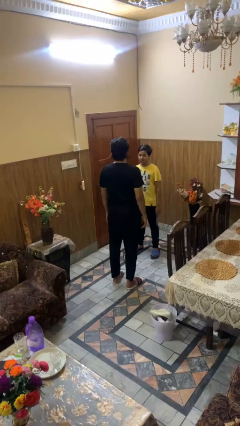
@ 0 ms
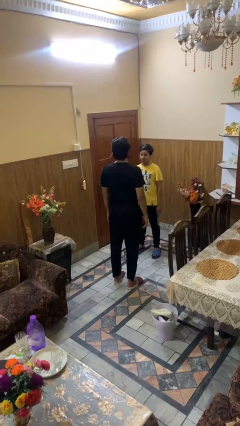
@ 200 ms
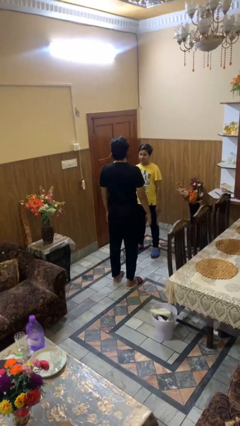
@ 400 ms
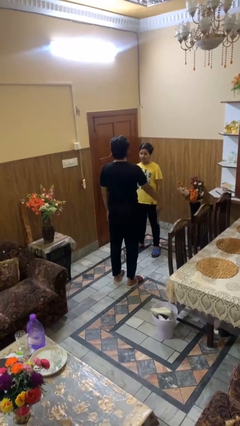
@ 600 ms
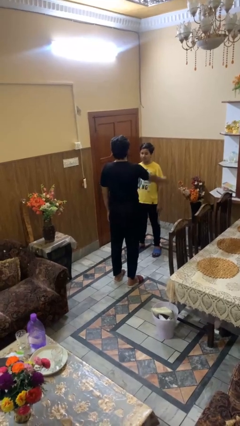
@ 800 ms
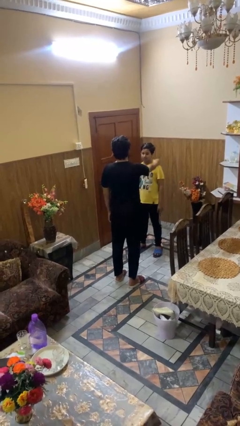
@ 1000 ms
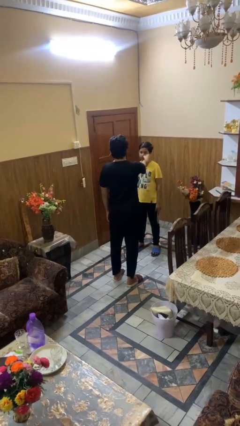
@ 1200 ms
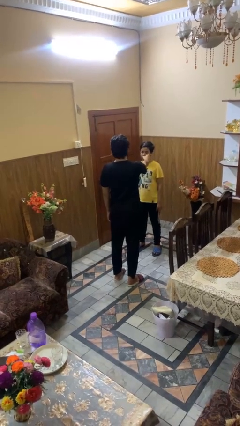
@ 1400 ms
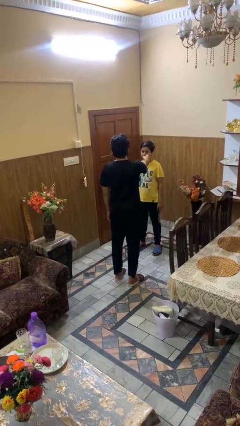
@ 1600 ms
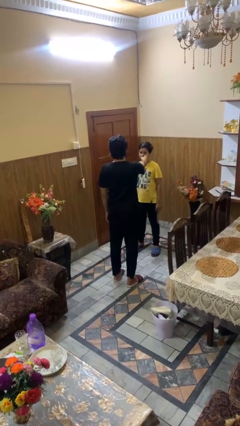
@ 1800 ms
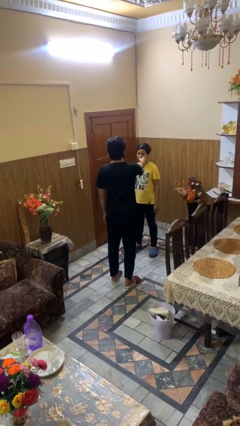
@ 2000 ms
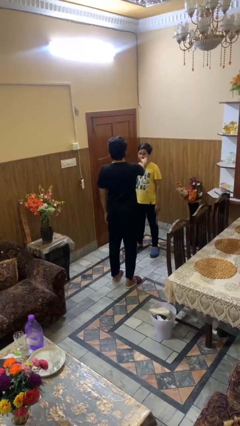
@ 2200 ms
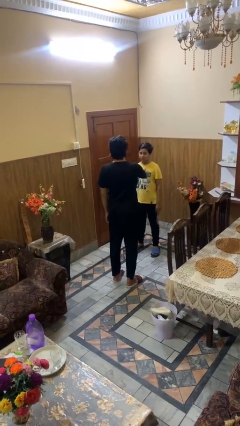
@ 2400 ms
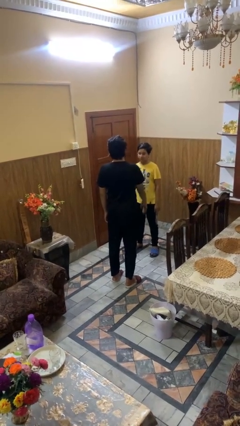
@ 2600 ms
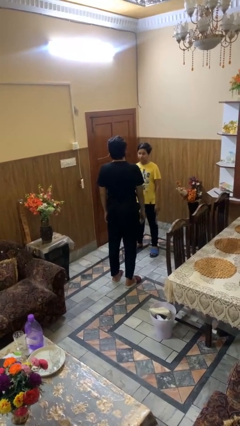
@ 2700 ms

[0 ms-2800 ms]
person touches face of person

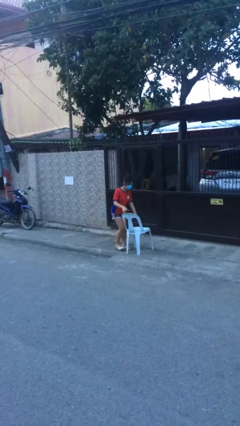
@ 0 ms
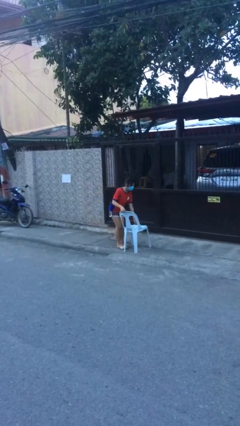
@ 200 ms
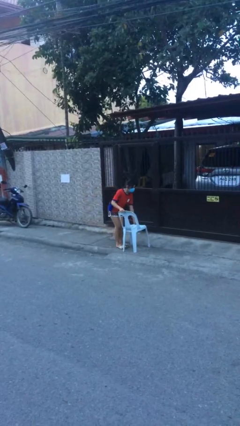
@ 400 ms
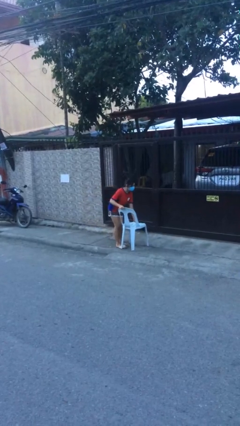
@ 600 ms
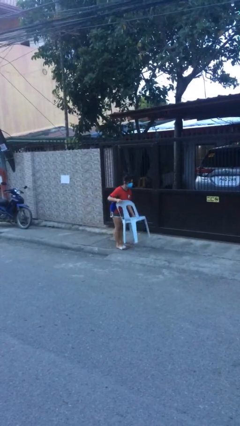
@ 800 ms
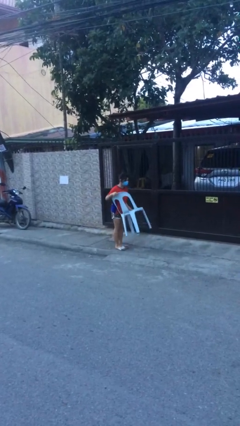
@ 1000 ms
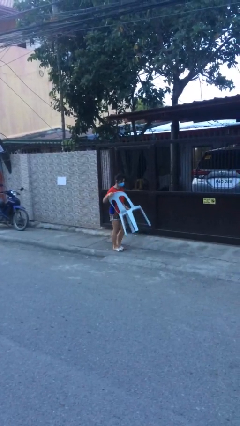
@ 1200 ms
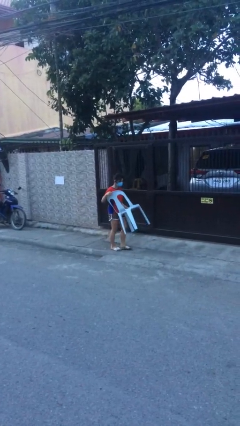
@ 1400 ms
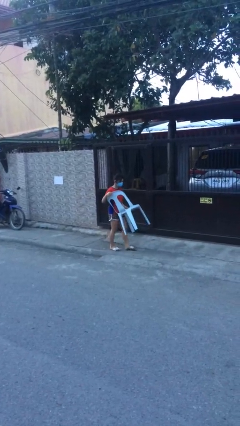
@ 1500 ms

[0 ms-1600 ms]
person picks up object from floor

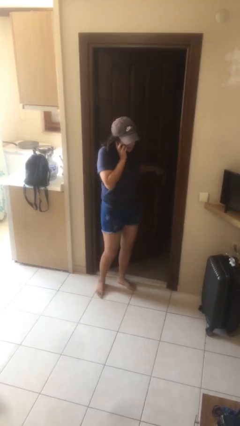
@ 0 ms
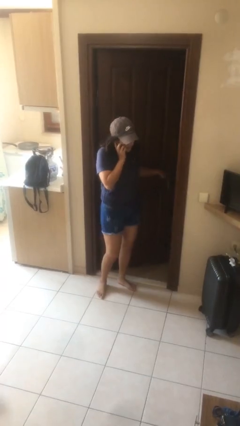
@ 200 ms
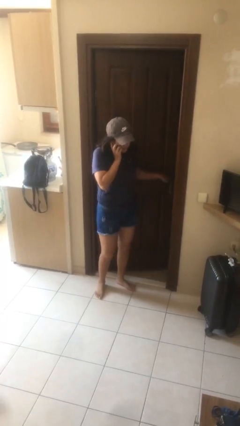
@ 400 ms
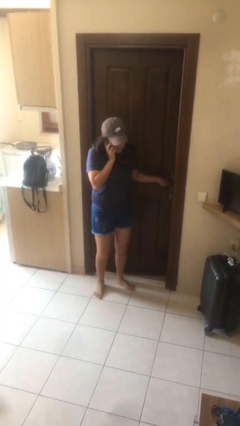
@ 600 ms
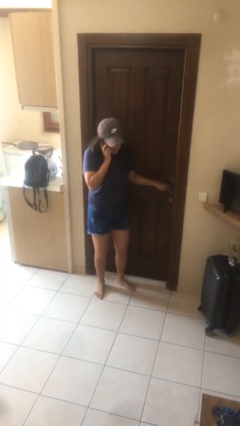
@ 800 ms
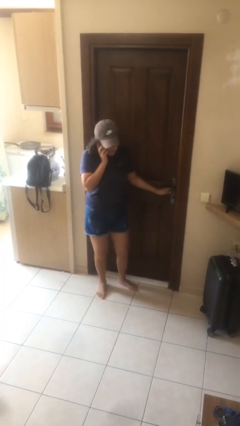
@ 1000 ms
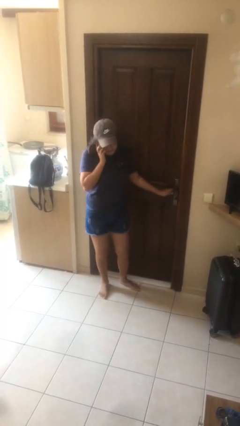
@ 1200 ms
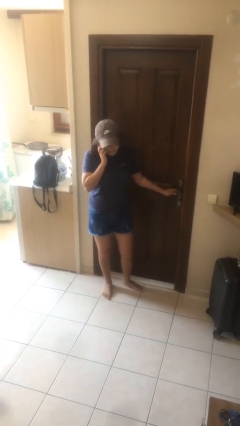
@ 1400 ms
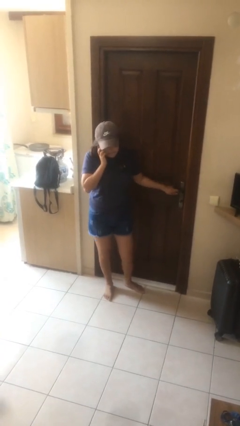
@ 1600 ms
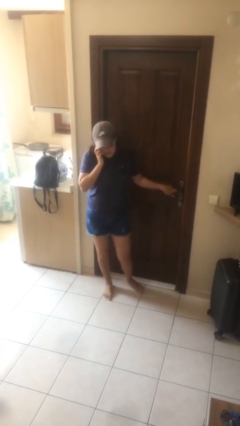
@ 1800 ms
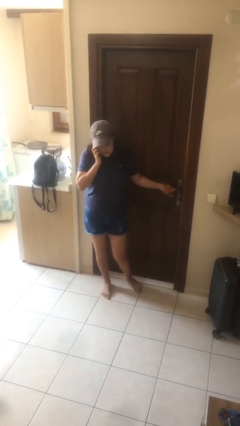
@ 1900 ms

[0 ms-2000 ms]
person closes facility door

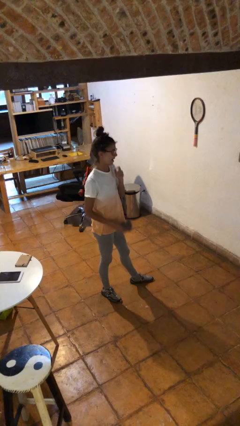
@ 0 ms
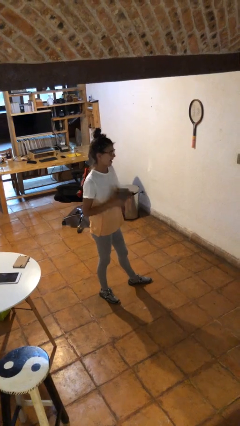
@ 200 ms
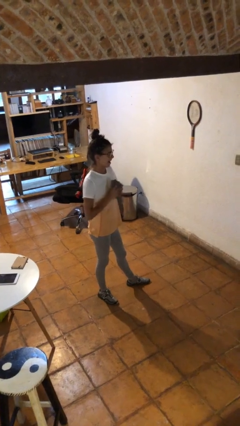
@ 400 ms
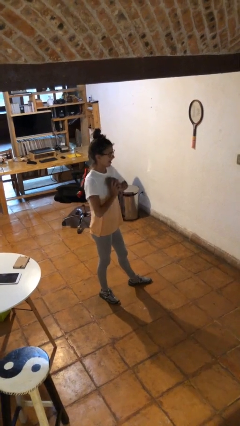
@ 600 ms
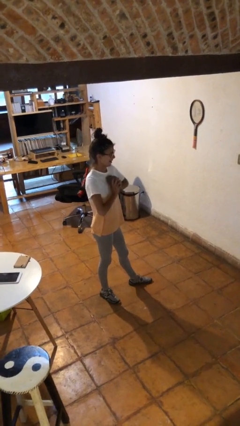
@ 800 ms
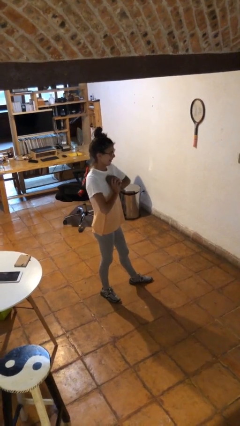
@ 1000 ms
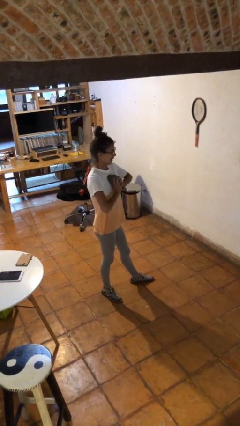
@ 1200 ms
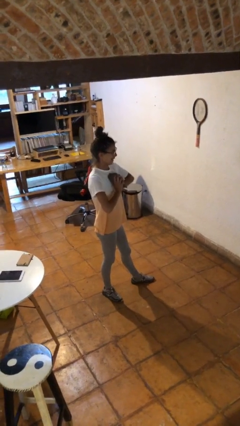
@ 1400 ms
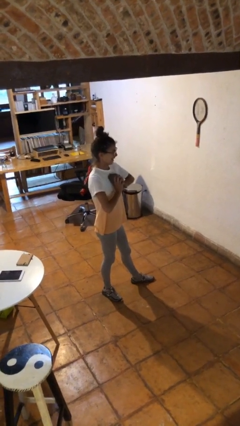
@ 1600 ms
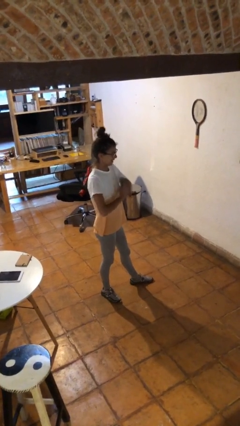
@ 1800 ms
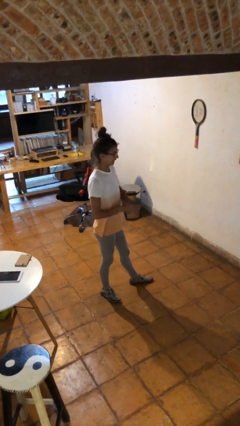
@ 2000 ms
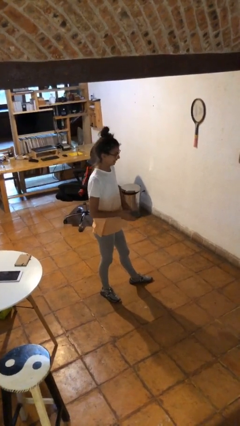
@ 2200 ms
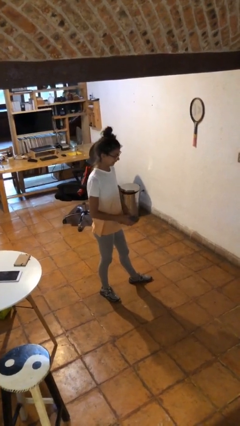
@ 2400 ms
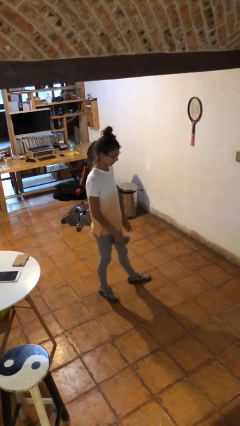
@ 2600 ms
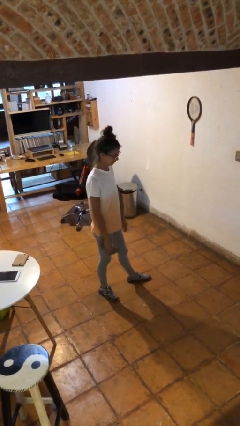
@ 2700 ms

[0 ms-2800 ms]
person squeezes object

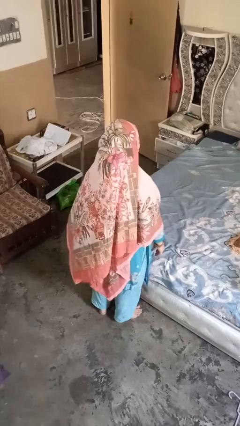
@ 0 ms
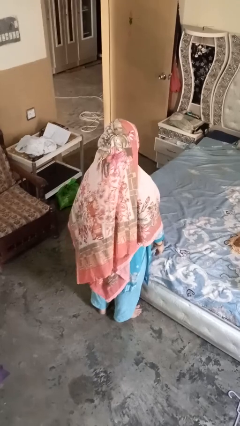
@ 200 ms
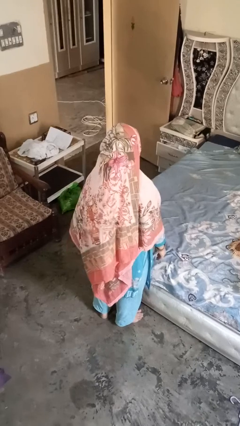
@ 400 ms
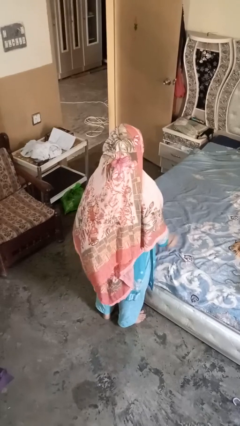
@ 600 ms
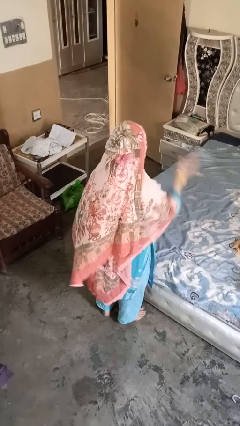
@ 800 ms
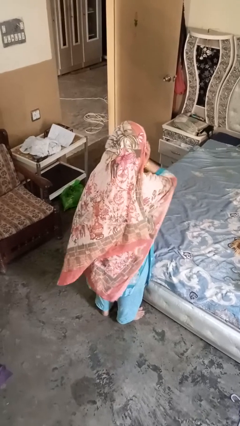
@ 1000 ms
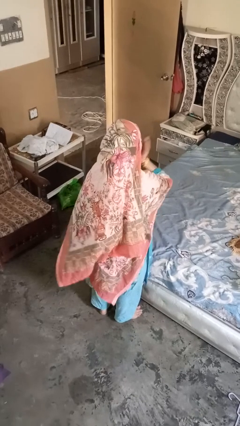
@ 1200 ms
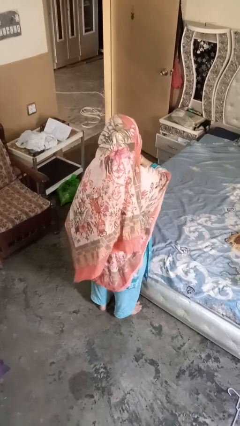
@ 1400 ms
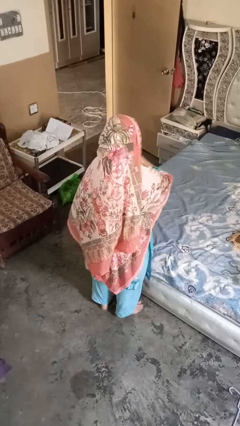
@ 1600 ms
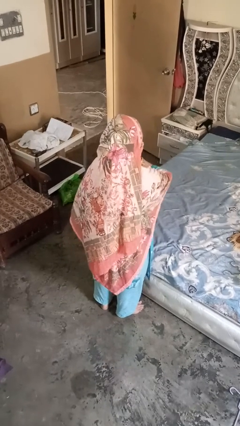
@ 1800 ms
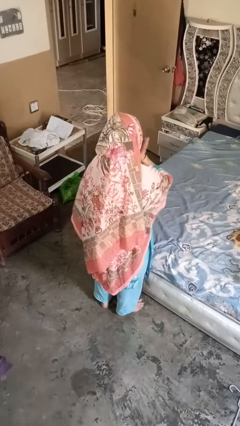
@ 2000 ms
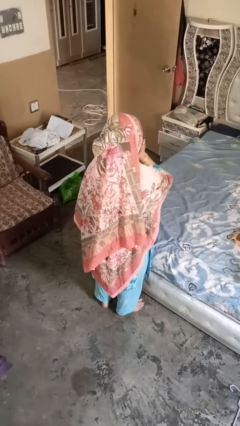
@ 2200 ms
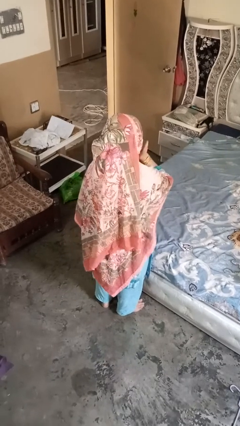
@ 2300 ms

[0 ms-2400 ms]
person strokes chin

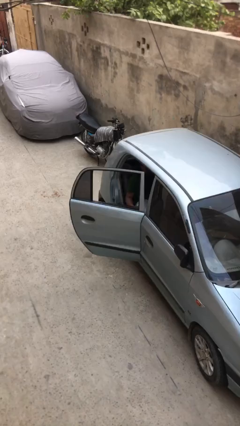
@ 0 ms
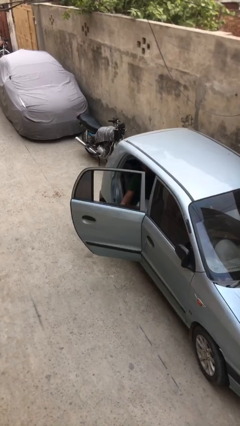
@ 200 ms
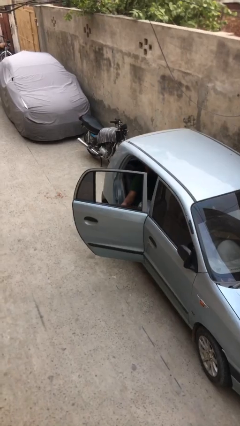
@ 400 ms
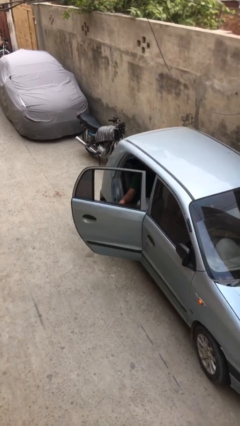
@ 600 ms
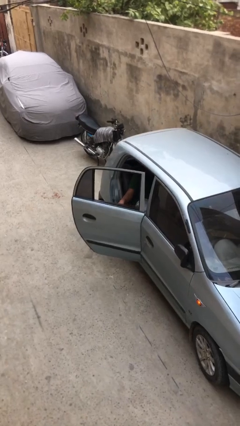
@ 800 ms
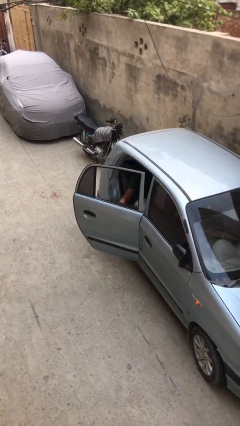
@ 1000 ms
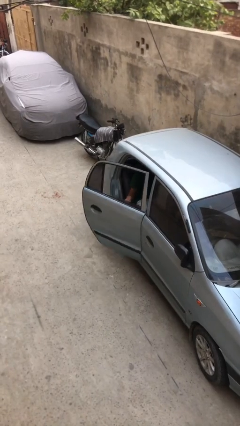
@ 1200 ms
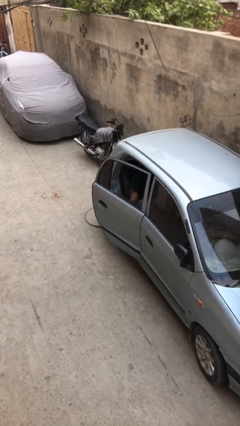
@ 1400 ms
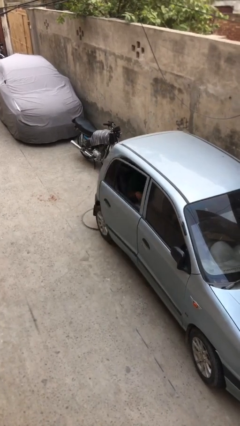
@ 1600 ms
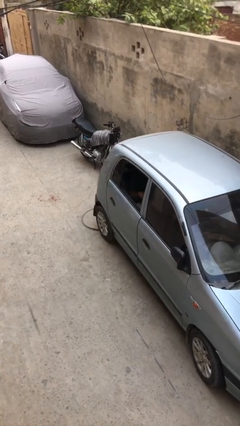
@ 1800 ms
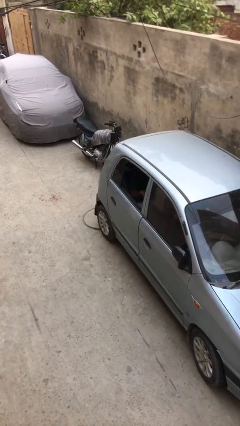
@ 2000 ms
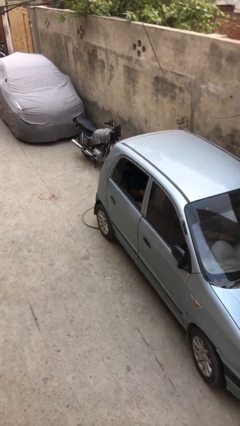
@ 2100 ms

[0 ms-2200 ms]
person closes car door

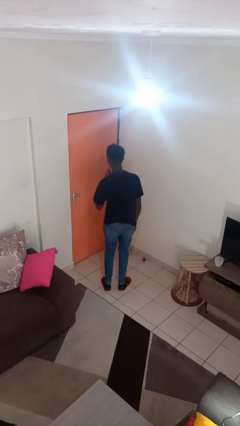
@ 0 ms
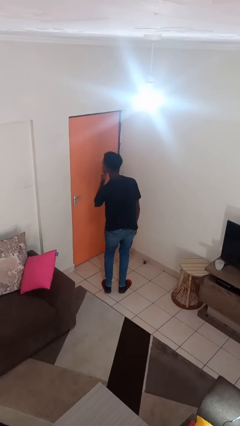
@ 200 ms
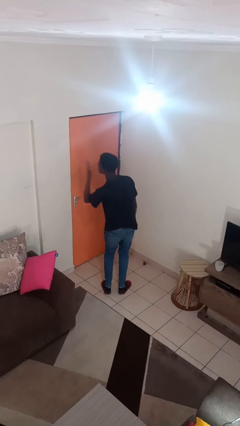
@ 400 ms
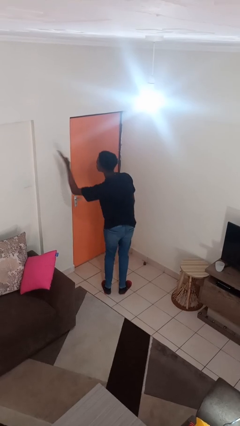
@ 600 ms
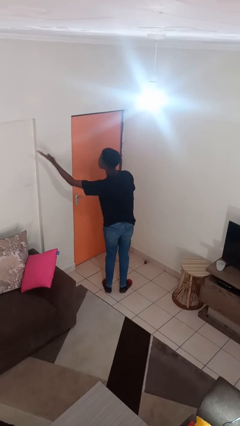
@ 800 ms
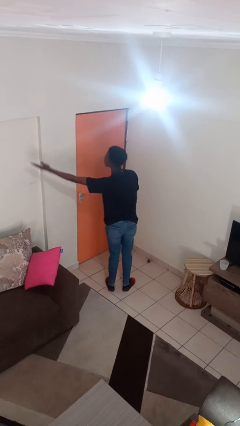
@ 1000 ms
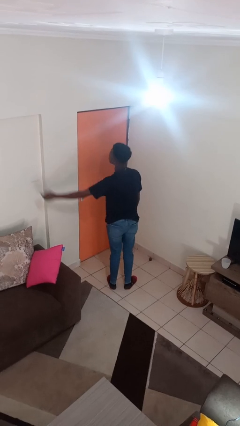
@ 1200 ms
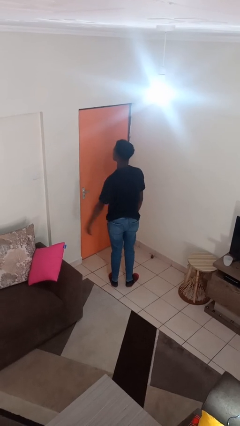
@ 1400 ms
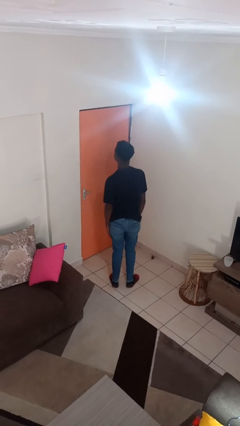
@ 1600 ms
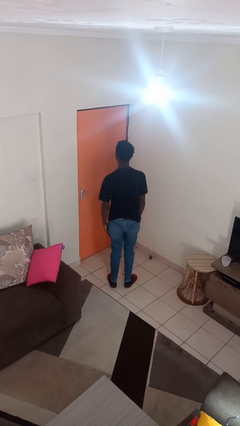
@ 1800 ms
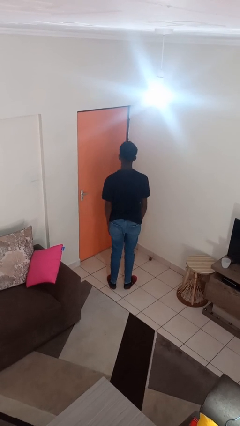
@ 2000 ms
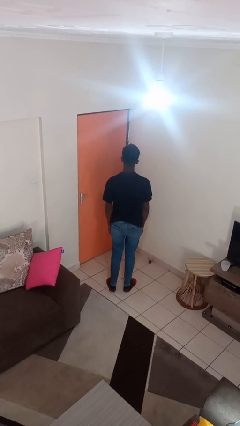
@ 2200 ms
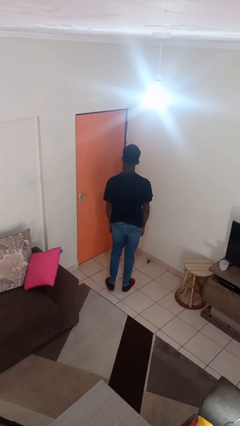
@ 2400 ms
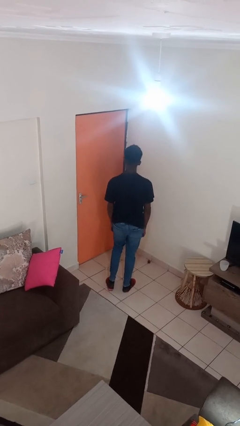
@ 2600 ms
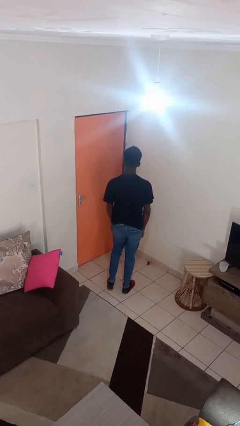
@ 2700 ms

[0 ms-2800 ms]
person gestures blow kiss

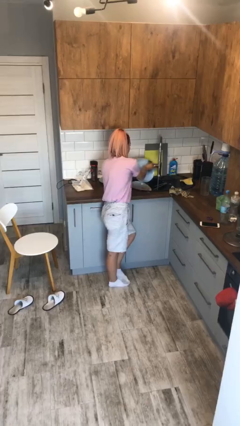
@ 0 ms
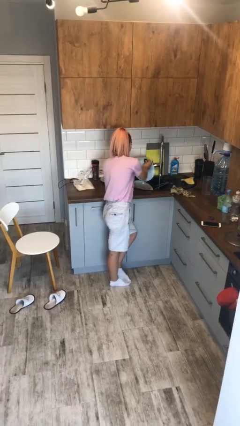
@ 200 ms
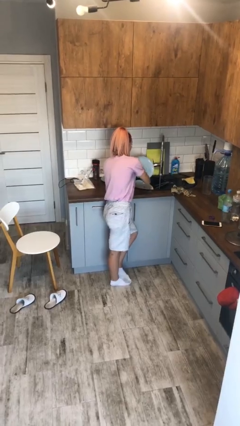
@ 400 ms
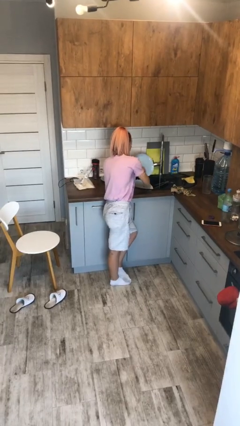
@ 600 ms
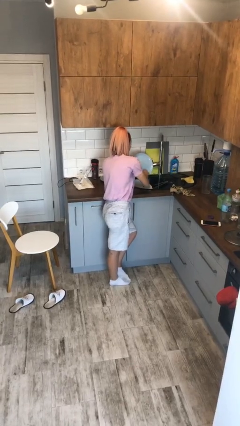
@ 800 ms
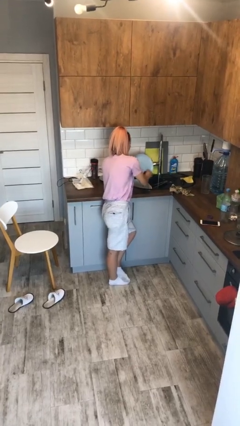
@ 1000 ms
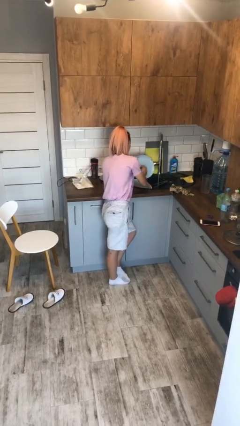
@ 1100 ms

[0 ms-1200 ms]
person washes dish
